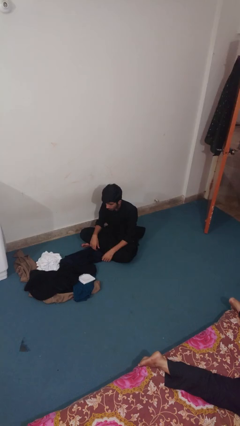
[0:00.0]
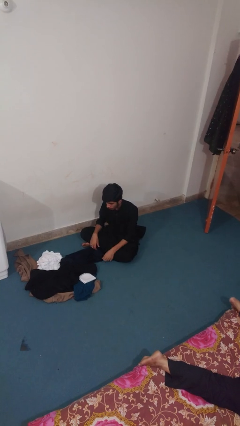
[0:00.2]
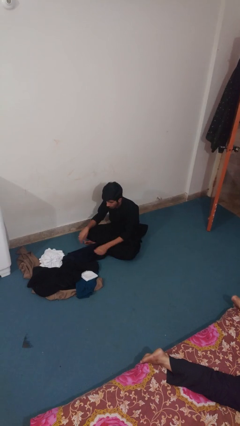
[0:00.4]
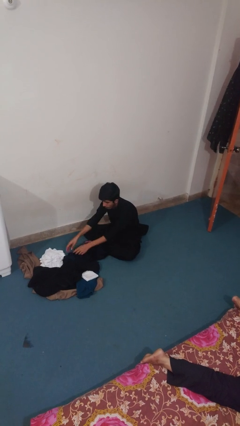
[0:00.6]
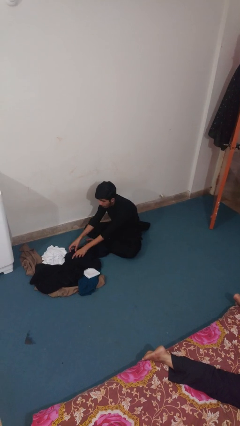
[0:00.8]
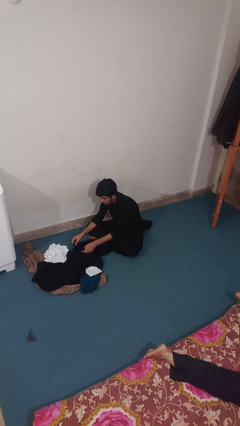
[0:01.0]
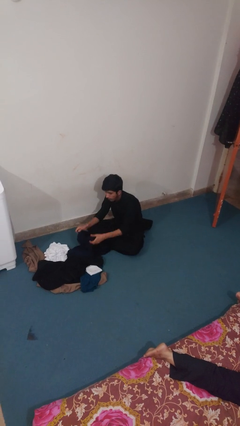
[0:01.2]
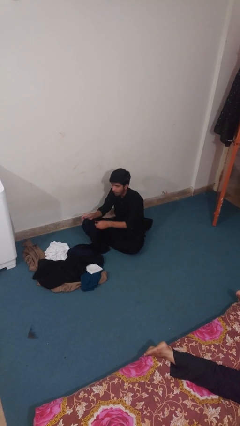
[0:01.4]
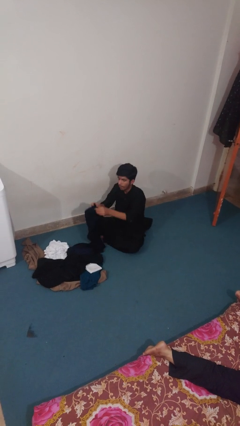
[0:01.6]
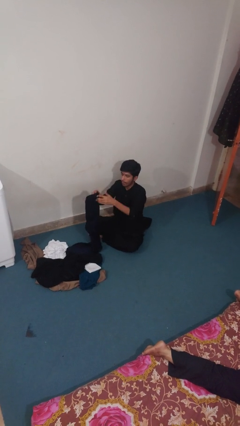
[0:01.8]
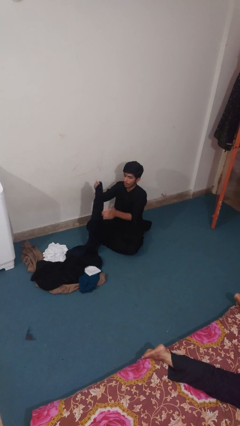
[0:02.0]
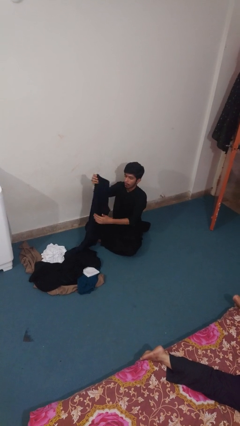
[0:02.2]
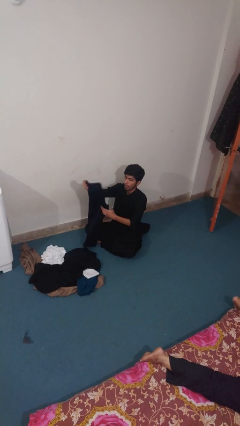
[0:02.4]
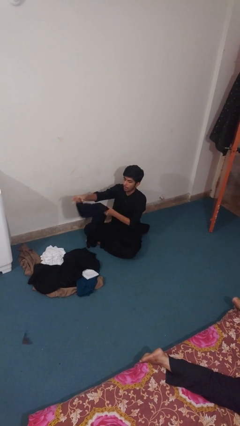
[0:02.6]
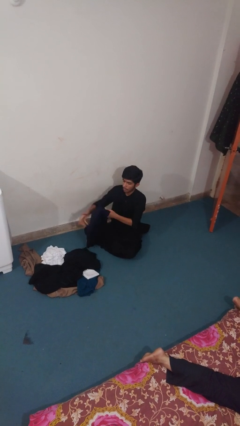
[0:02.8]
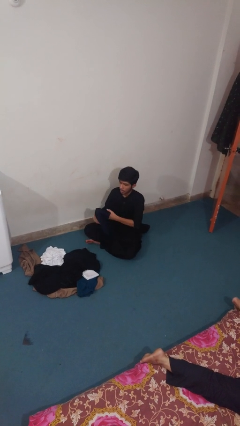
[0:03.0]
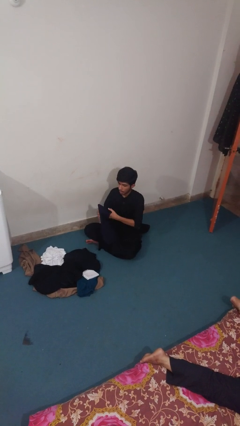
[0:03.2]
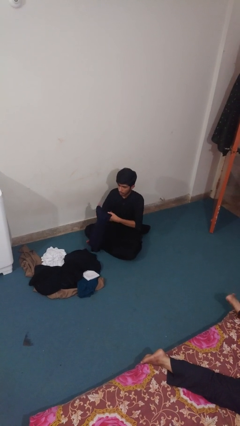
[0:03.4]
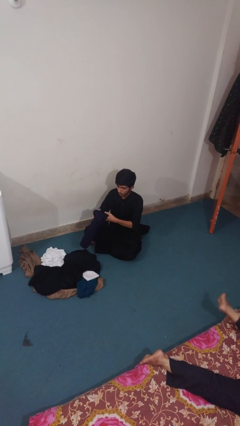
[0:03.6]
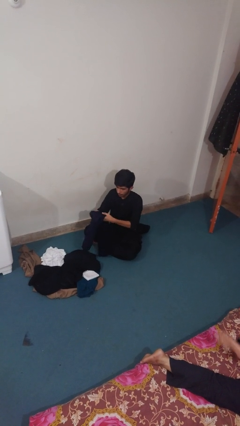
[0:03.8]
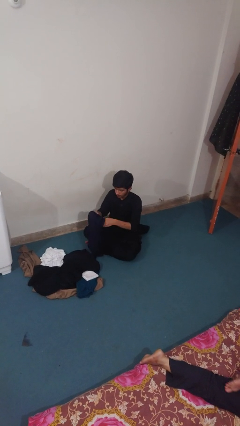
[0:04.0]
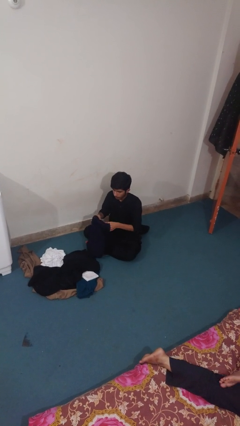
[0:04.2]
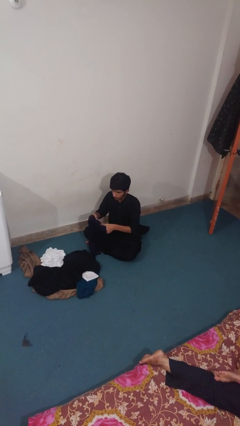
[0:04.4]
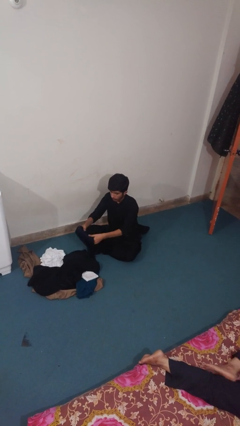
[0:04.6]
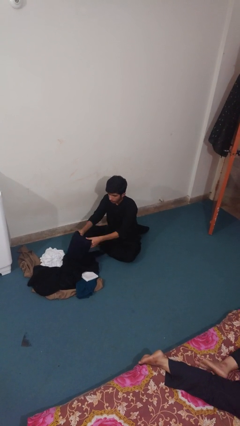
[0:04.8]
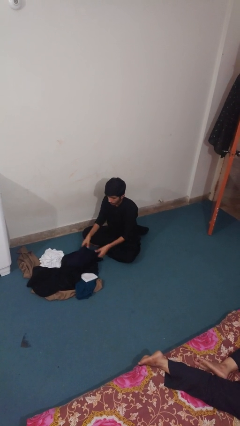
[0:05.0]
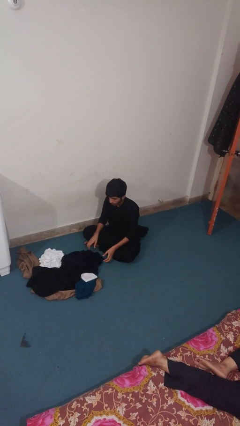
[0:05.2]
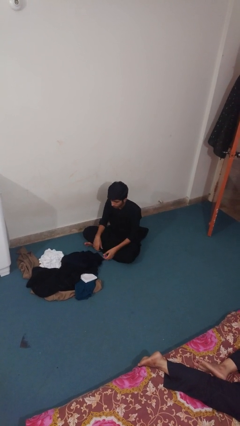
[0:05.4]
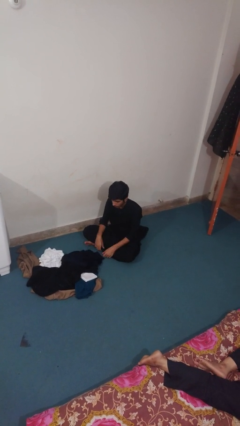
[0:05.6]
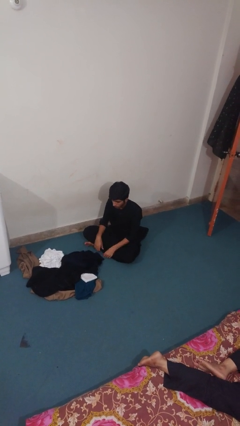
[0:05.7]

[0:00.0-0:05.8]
person folds pants

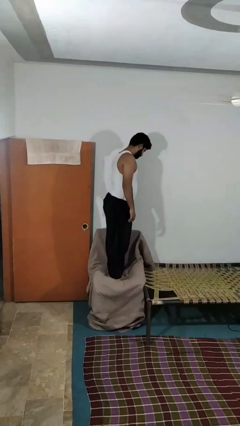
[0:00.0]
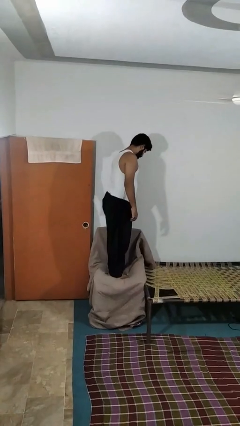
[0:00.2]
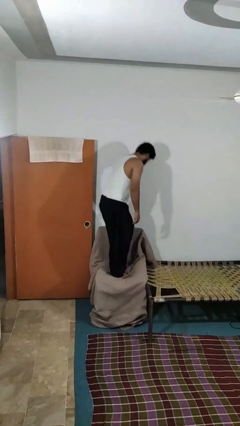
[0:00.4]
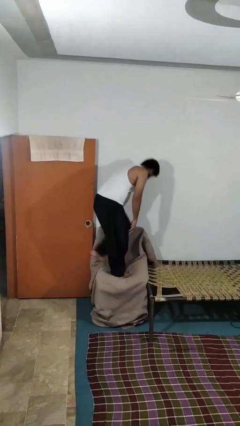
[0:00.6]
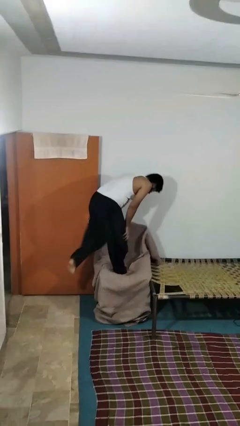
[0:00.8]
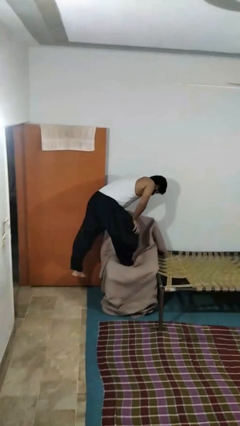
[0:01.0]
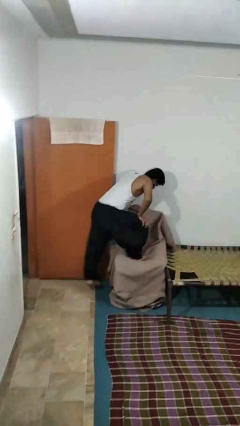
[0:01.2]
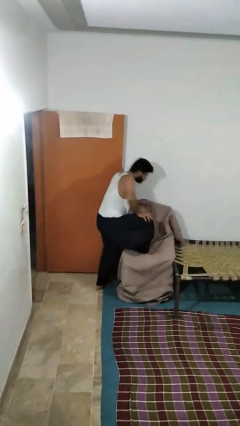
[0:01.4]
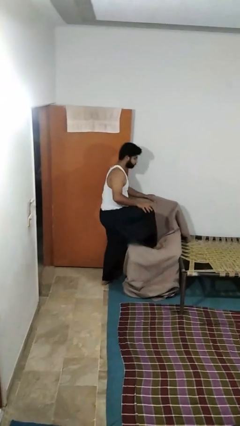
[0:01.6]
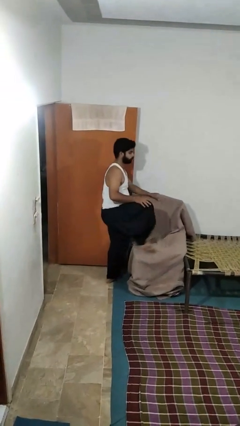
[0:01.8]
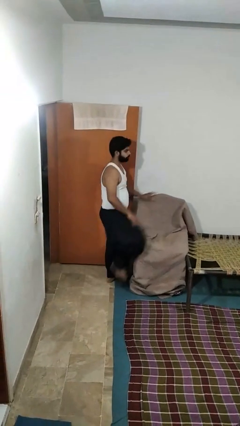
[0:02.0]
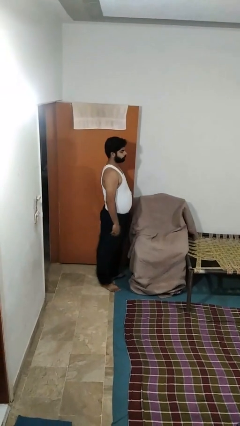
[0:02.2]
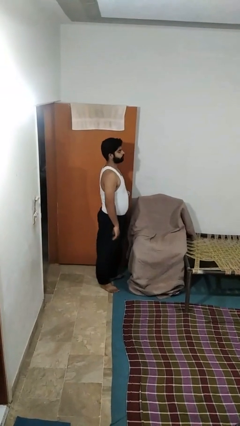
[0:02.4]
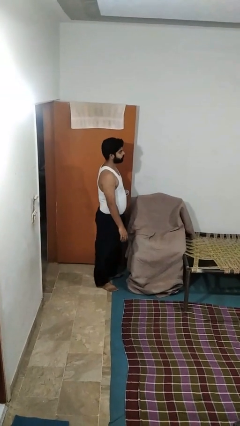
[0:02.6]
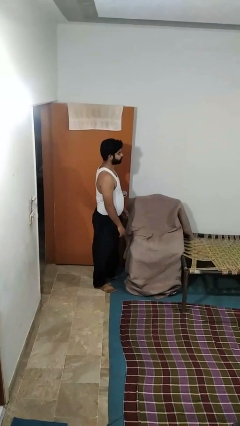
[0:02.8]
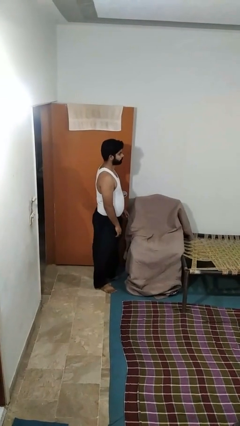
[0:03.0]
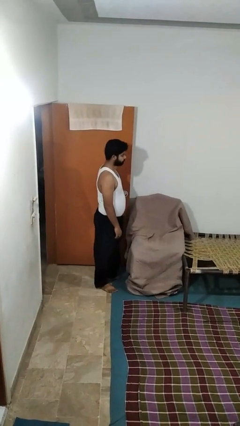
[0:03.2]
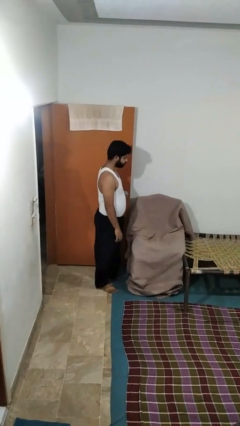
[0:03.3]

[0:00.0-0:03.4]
person climbs off couch

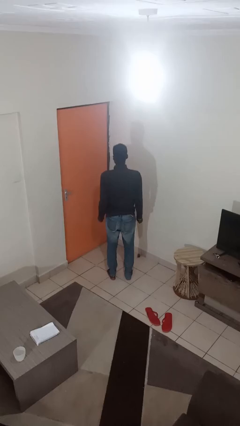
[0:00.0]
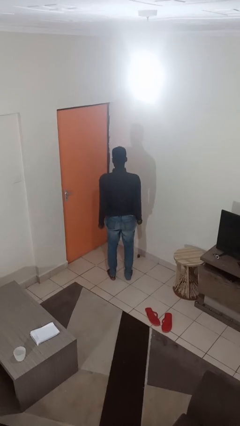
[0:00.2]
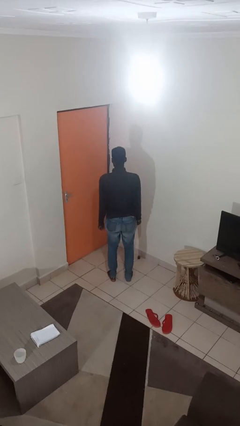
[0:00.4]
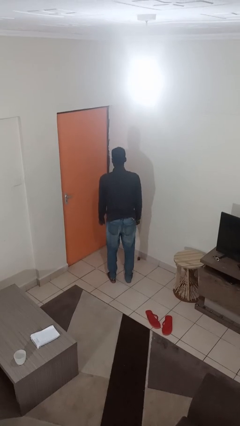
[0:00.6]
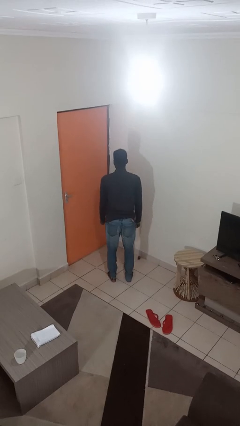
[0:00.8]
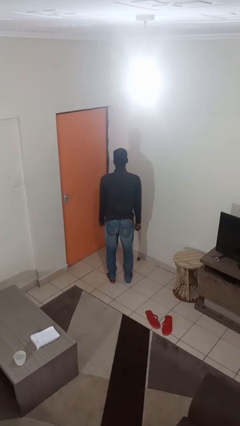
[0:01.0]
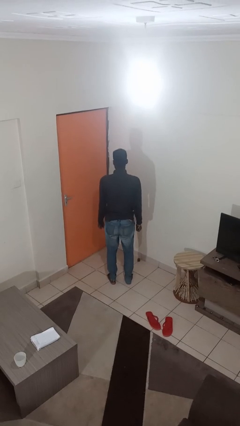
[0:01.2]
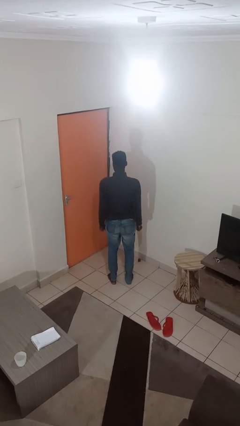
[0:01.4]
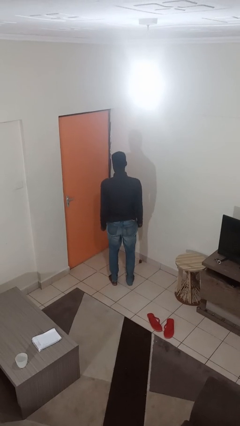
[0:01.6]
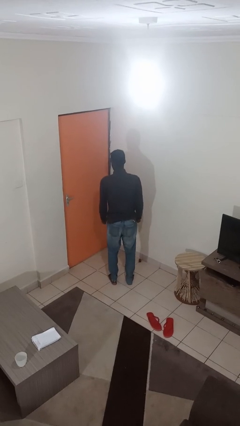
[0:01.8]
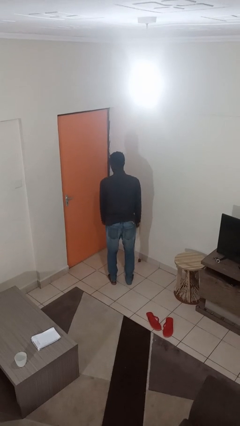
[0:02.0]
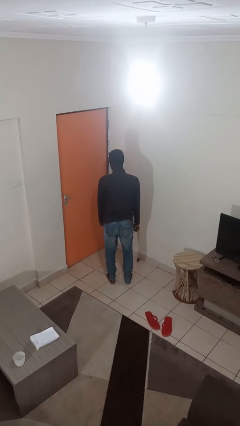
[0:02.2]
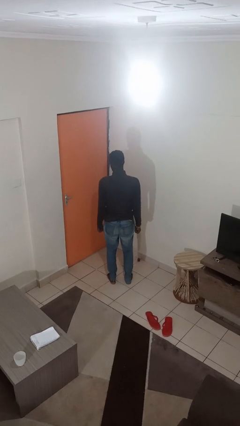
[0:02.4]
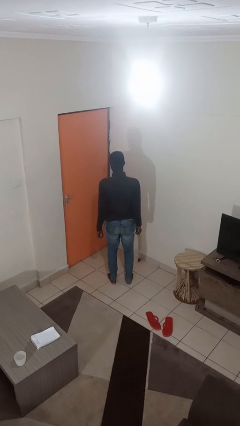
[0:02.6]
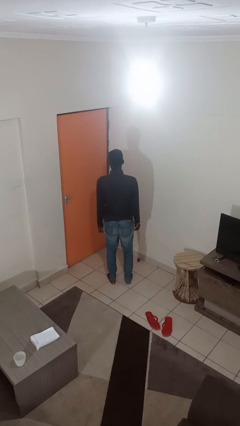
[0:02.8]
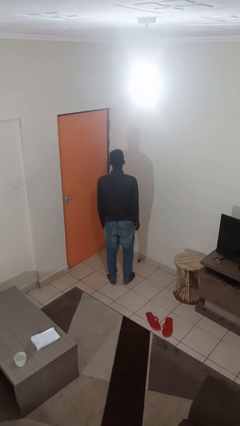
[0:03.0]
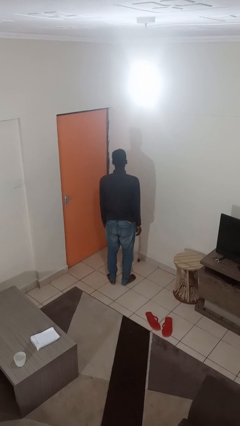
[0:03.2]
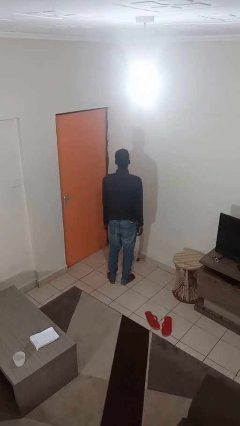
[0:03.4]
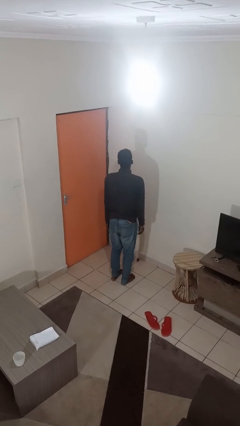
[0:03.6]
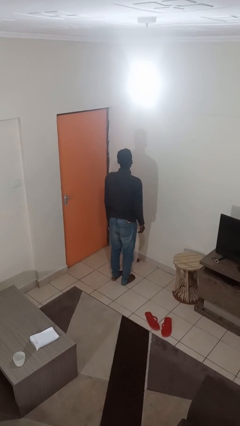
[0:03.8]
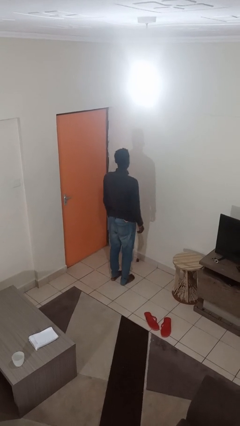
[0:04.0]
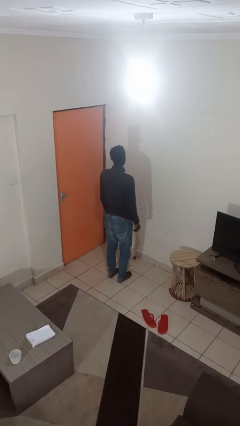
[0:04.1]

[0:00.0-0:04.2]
person wiggles hips

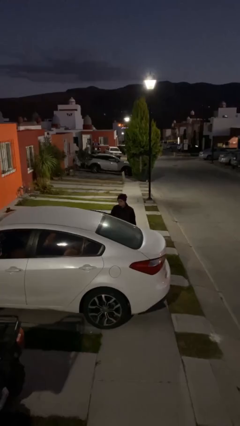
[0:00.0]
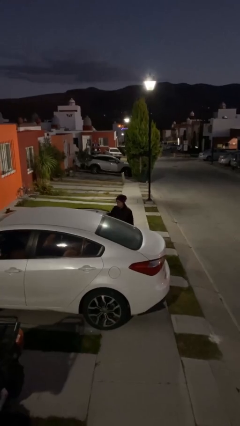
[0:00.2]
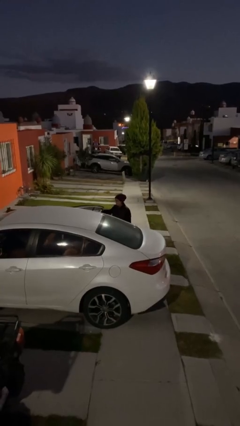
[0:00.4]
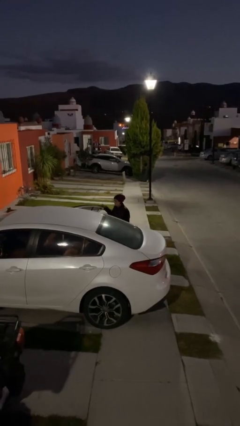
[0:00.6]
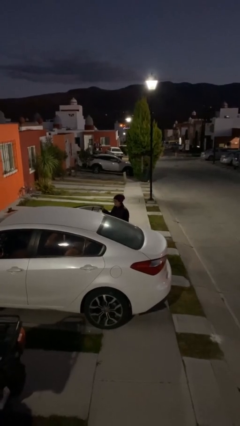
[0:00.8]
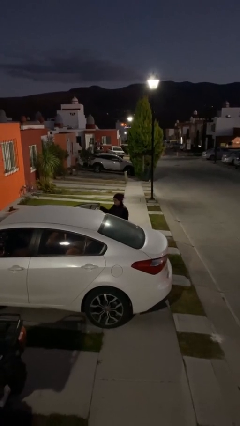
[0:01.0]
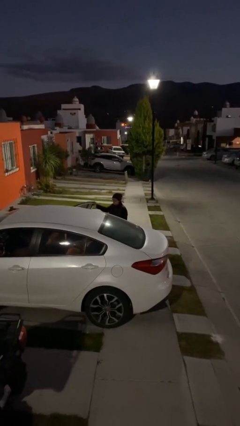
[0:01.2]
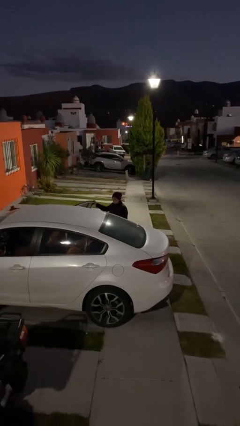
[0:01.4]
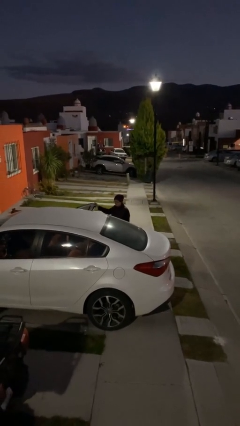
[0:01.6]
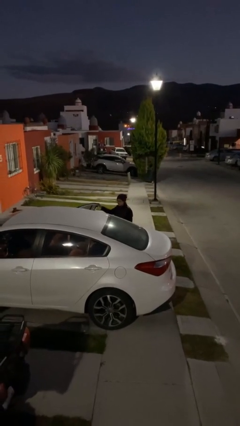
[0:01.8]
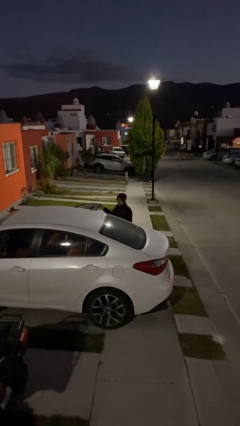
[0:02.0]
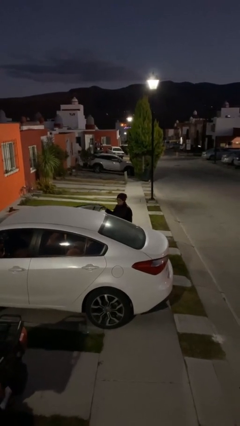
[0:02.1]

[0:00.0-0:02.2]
person opens car door

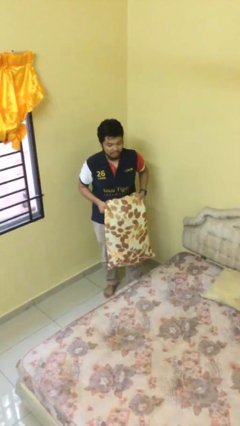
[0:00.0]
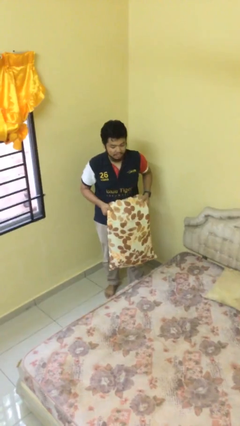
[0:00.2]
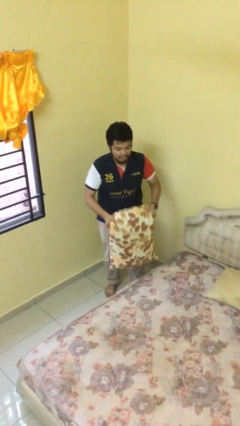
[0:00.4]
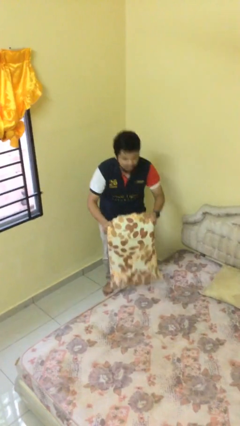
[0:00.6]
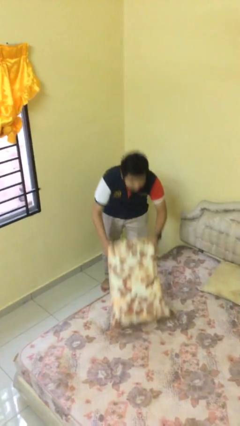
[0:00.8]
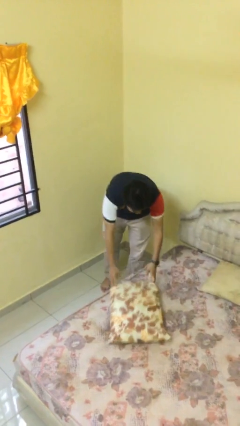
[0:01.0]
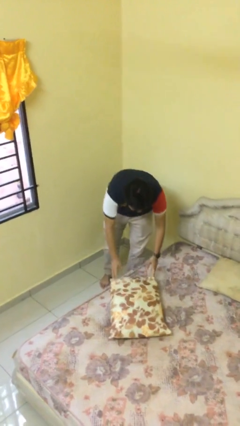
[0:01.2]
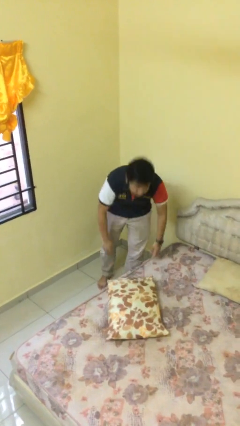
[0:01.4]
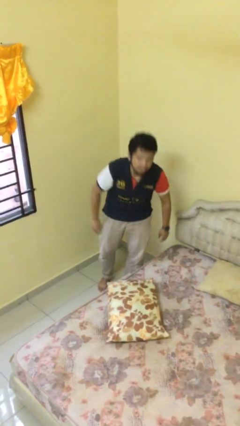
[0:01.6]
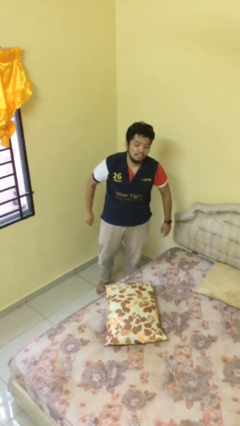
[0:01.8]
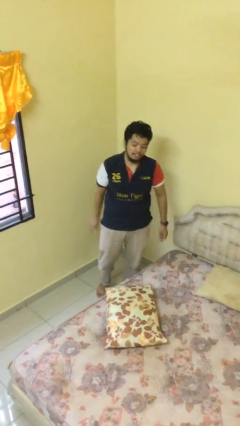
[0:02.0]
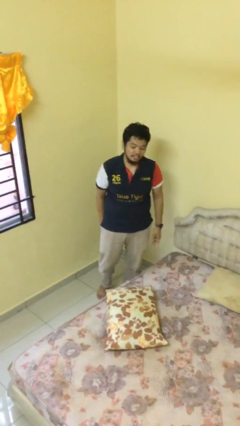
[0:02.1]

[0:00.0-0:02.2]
person puts down object on bed
